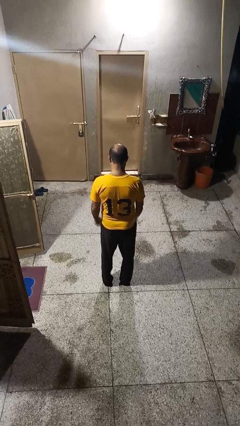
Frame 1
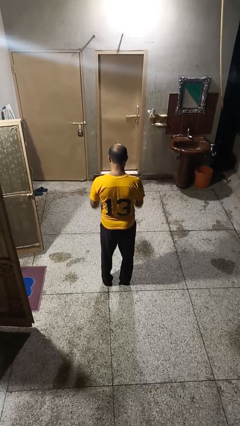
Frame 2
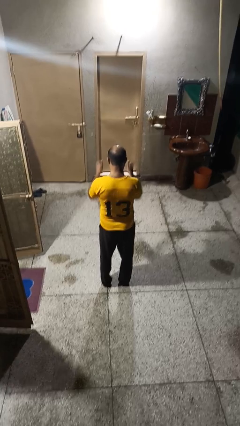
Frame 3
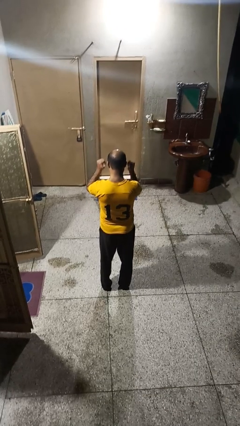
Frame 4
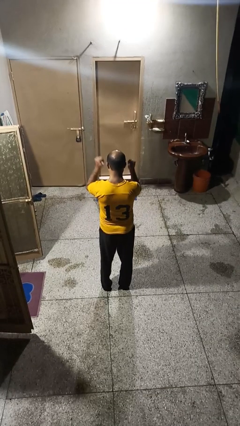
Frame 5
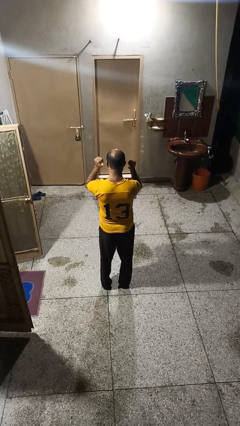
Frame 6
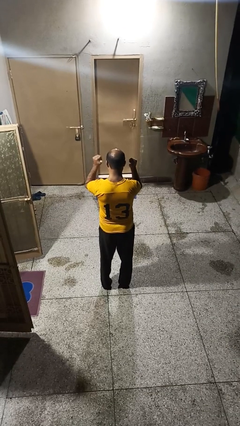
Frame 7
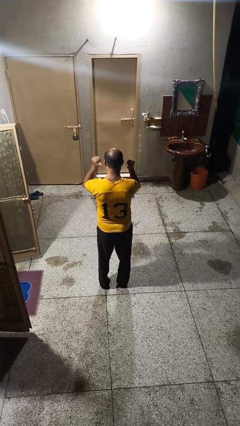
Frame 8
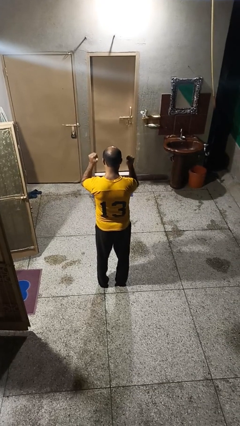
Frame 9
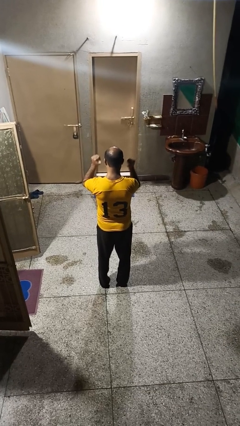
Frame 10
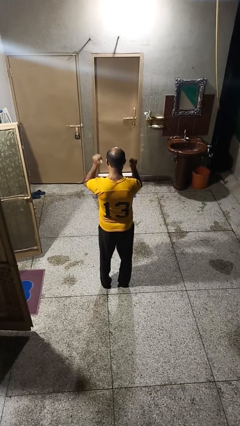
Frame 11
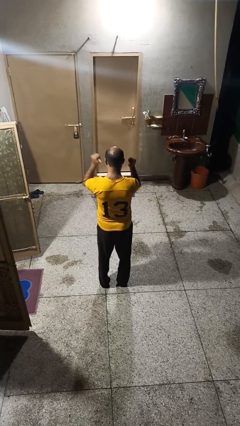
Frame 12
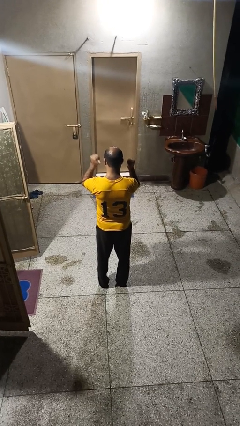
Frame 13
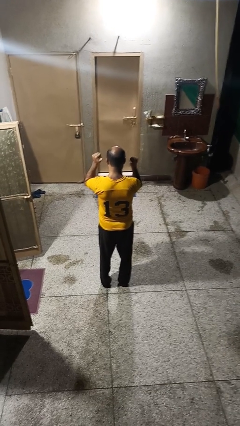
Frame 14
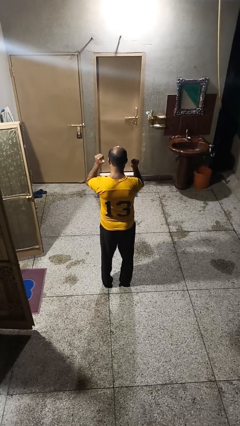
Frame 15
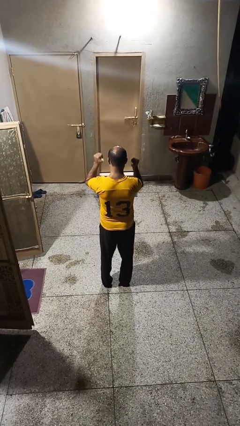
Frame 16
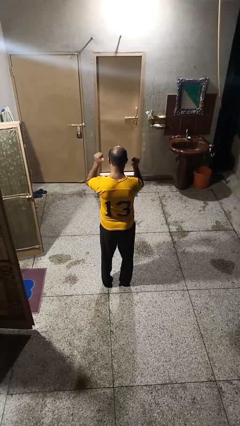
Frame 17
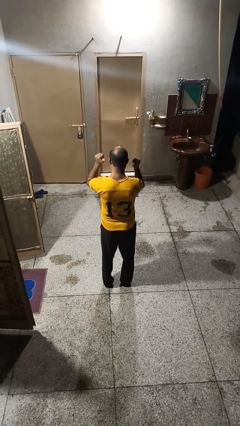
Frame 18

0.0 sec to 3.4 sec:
person gestures behind me

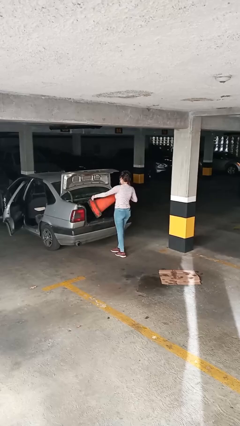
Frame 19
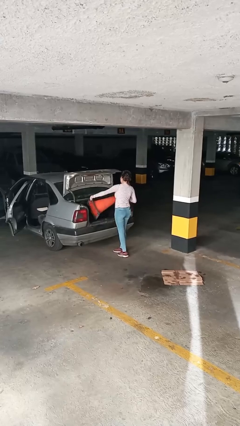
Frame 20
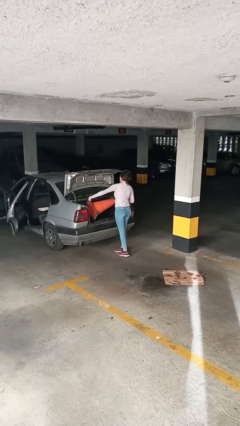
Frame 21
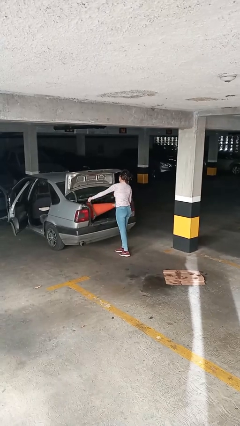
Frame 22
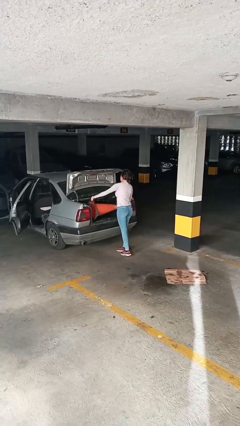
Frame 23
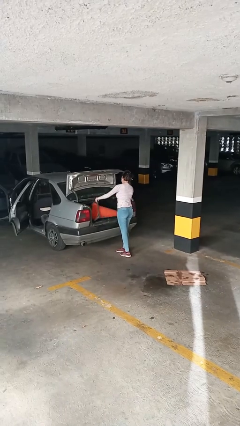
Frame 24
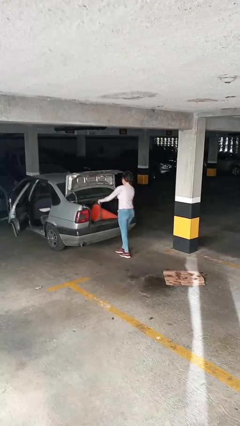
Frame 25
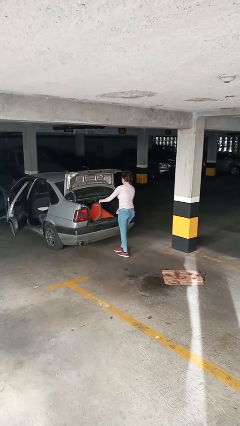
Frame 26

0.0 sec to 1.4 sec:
person loads car

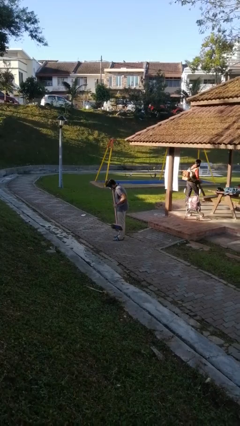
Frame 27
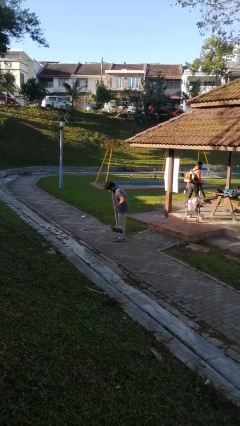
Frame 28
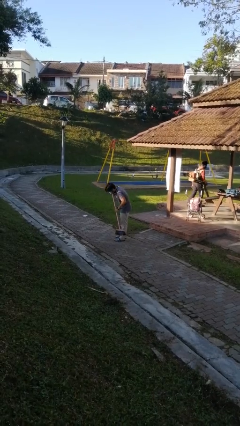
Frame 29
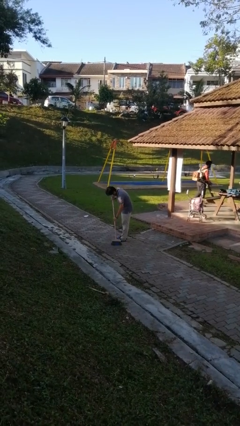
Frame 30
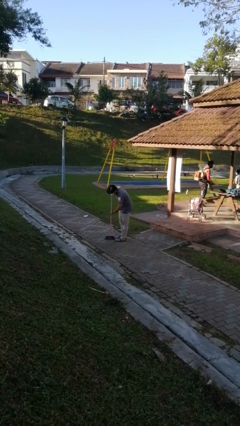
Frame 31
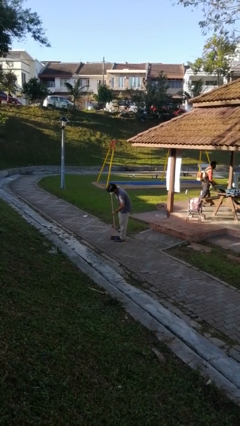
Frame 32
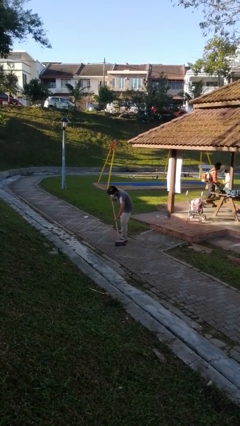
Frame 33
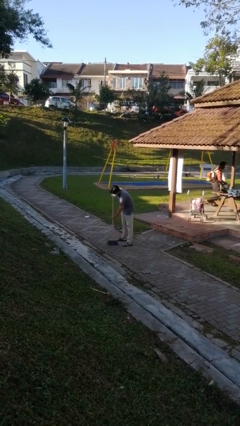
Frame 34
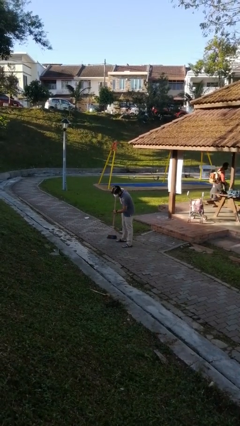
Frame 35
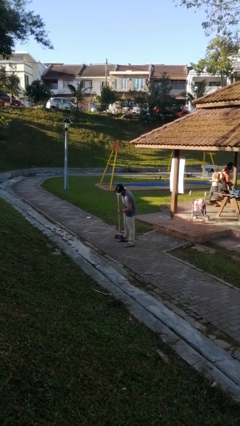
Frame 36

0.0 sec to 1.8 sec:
person sweeps floor

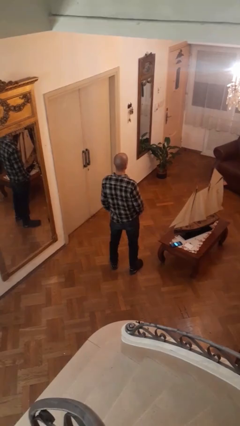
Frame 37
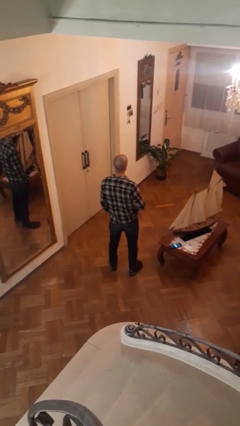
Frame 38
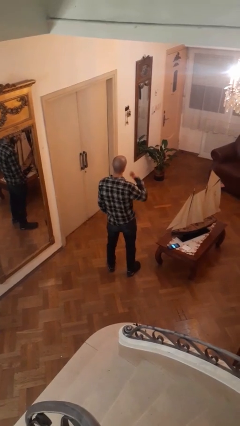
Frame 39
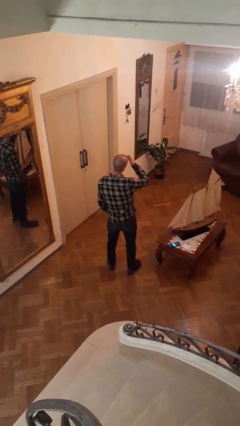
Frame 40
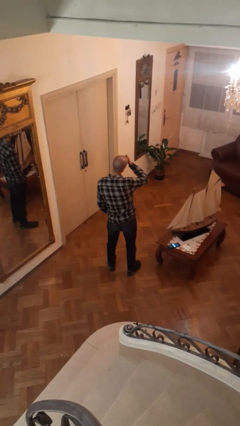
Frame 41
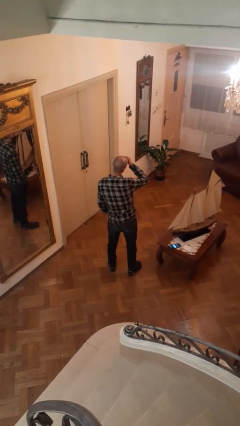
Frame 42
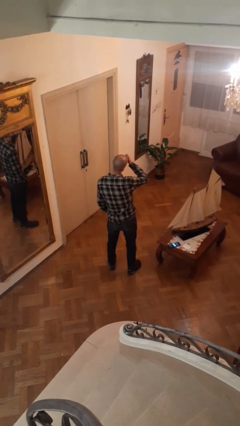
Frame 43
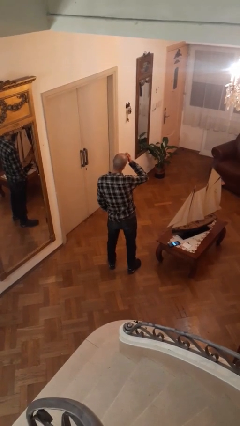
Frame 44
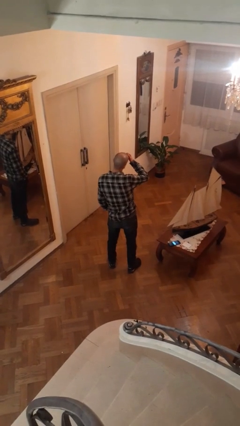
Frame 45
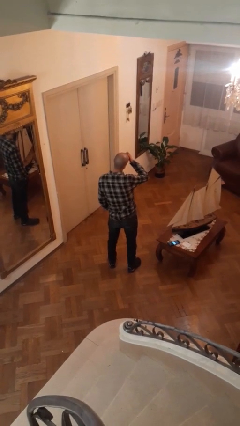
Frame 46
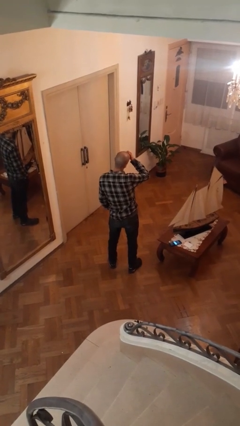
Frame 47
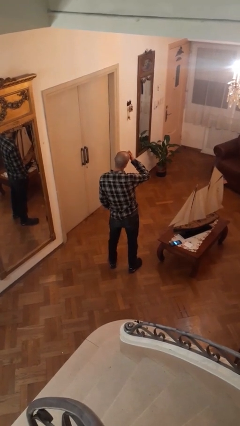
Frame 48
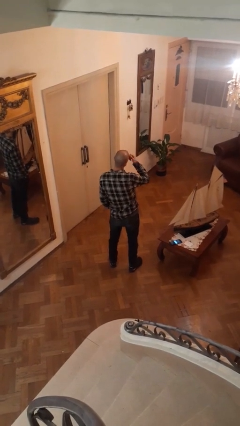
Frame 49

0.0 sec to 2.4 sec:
person scratches face

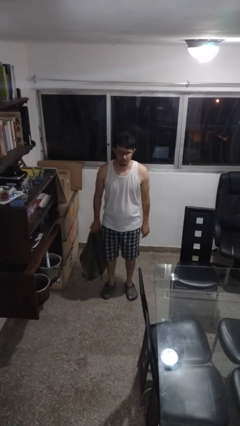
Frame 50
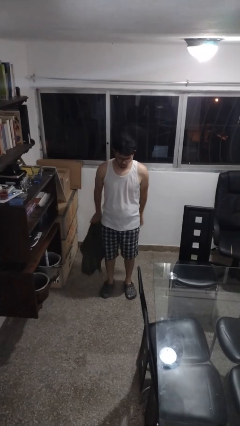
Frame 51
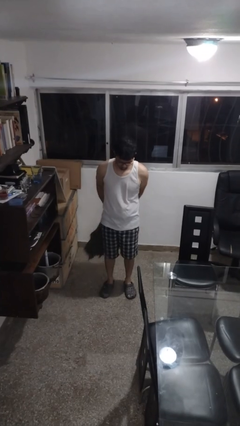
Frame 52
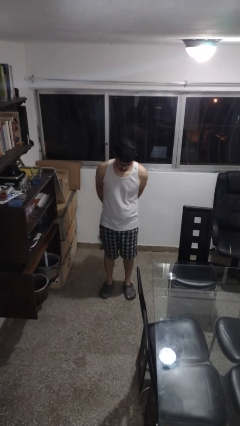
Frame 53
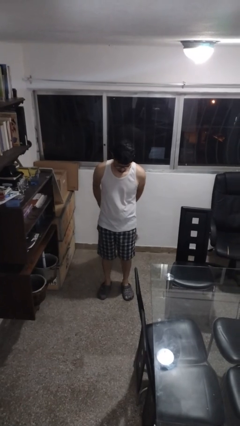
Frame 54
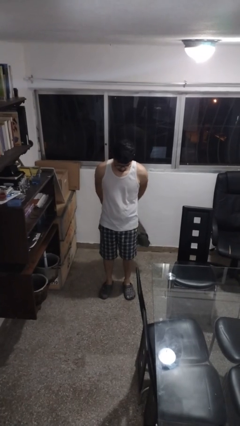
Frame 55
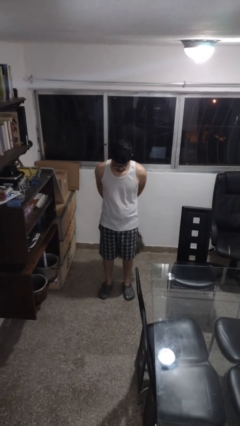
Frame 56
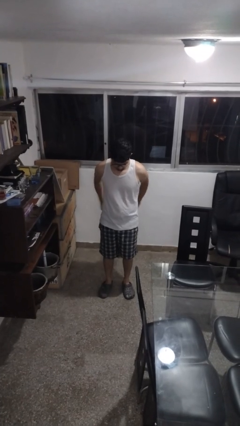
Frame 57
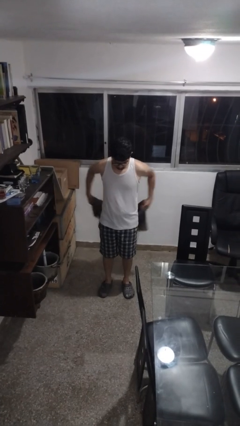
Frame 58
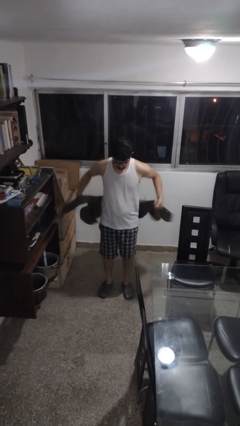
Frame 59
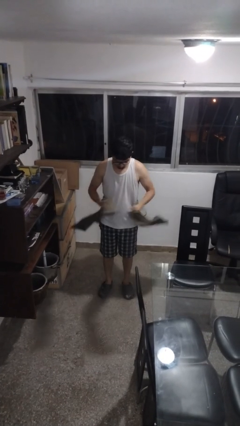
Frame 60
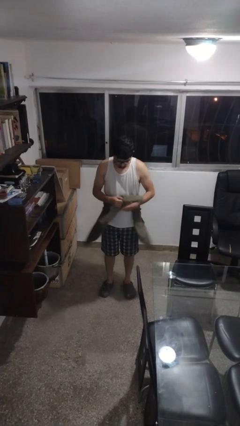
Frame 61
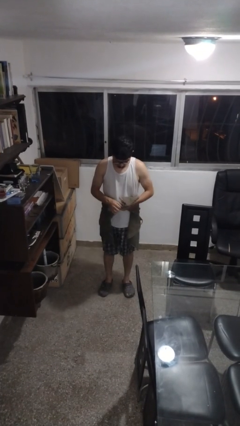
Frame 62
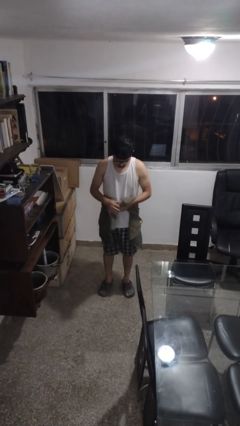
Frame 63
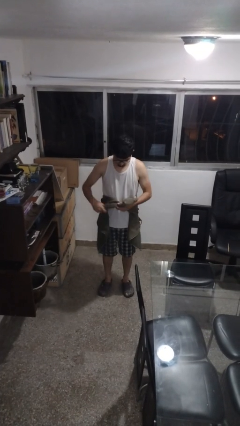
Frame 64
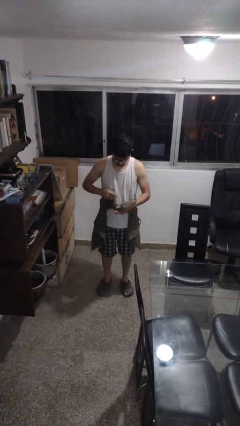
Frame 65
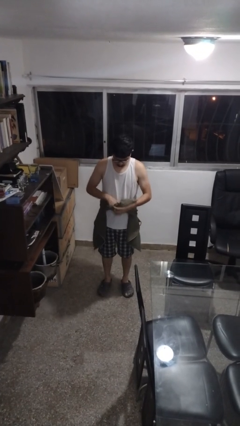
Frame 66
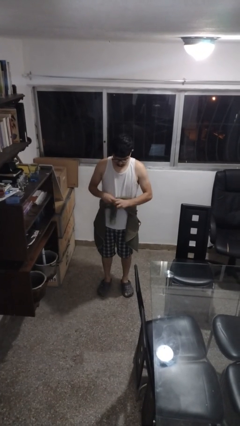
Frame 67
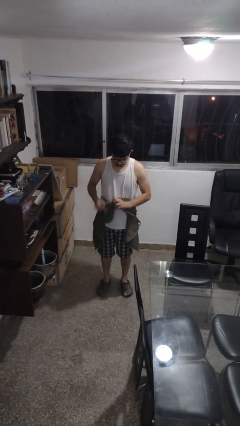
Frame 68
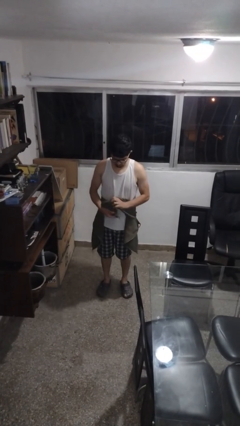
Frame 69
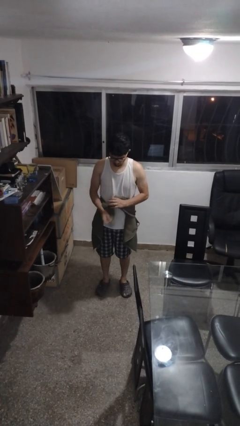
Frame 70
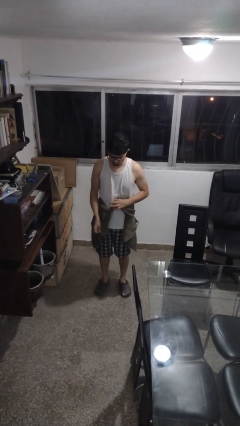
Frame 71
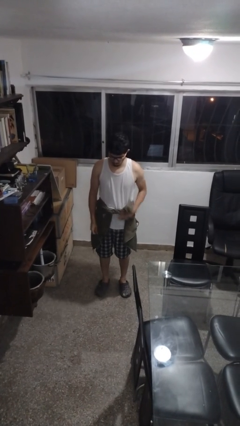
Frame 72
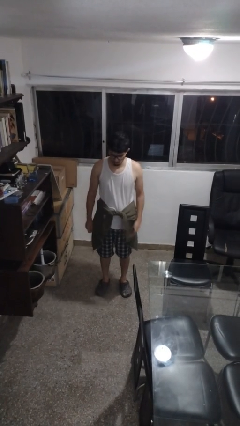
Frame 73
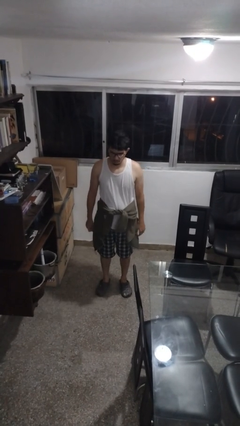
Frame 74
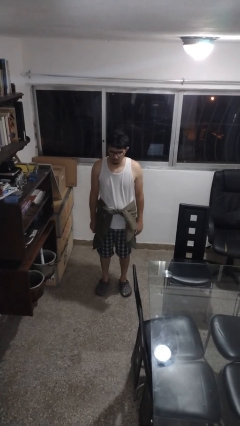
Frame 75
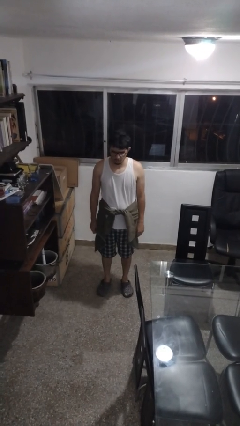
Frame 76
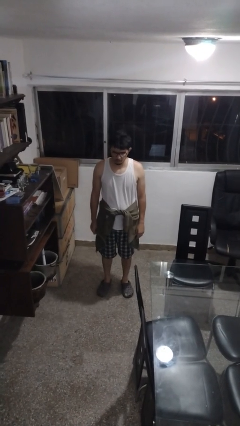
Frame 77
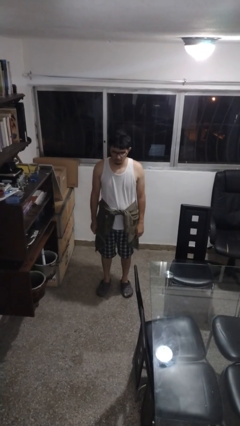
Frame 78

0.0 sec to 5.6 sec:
person ties jacket around waist

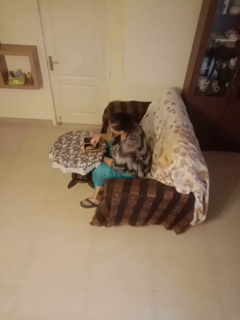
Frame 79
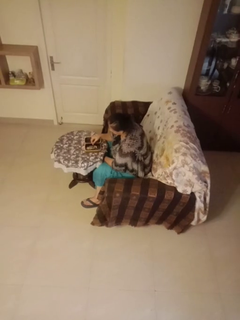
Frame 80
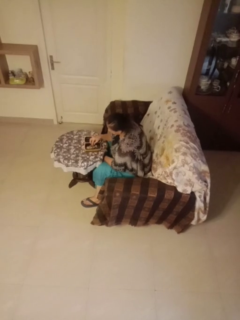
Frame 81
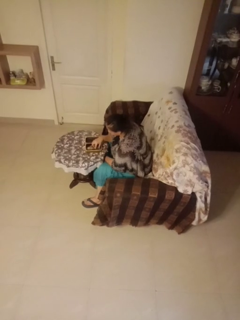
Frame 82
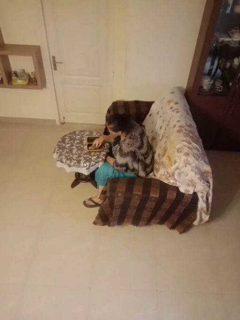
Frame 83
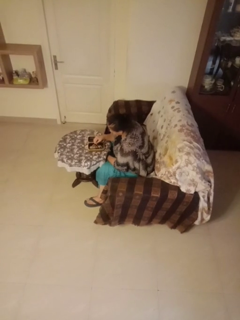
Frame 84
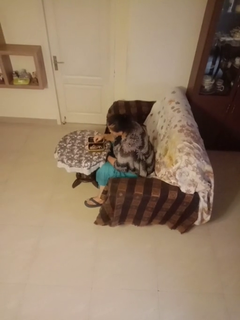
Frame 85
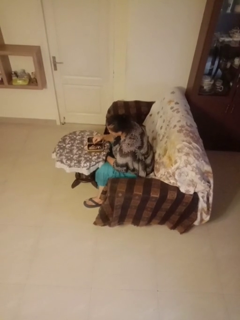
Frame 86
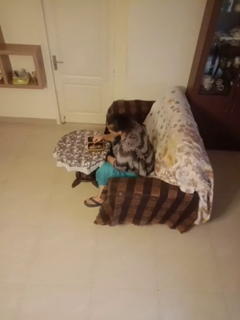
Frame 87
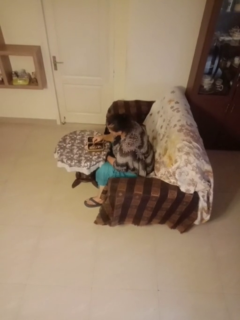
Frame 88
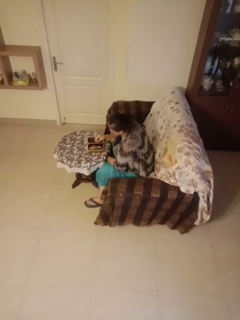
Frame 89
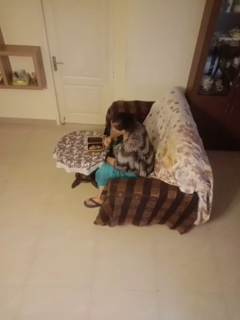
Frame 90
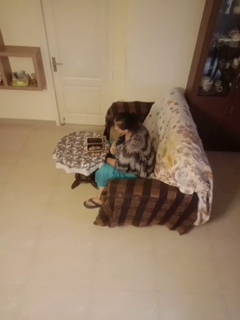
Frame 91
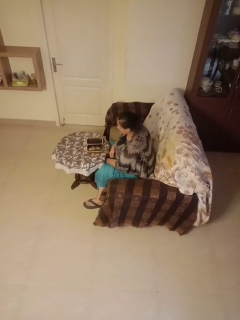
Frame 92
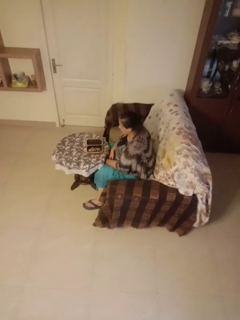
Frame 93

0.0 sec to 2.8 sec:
person searches jewelry box

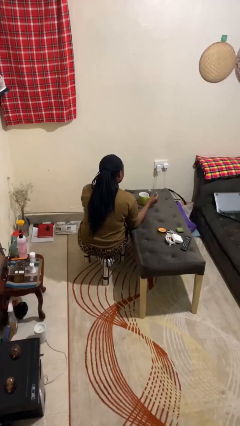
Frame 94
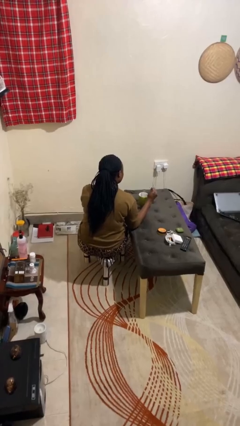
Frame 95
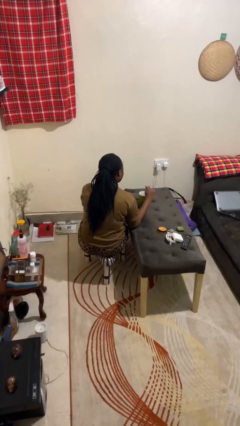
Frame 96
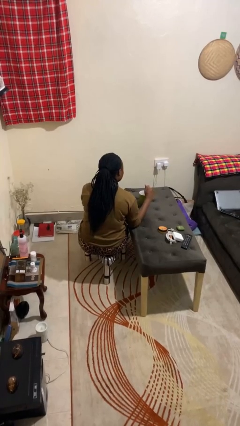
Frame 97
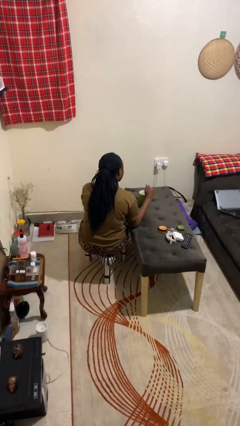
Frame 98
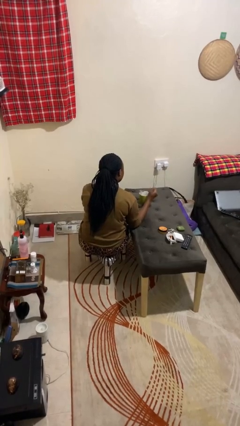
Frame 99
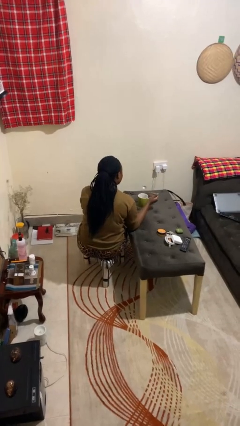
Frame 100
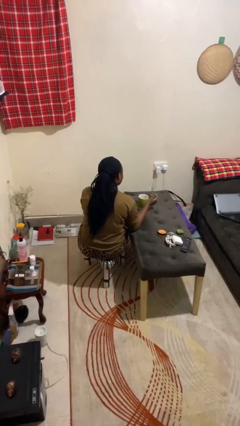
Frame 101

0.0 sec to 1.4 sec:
person stirs mug
